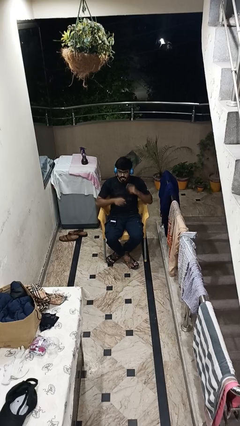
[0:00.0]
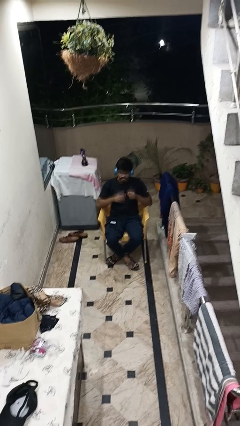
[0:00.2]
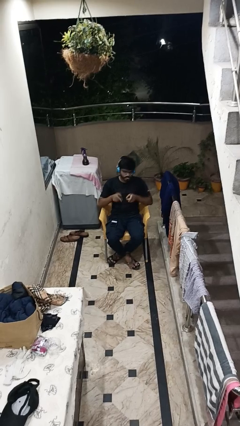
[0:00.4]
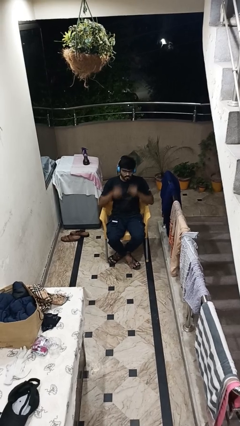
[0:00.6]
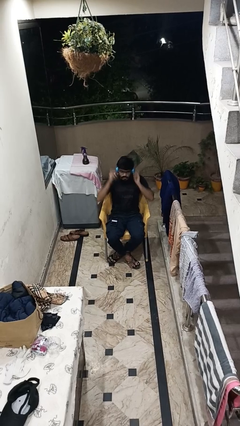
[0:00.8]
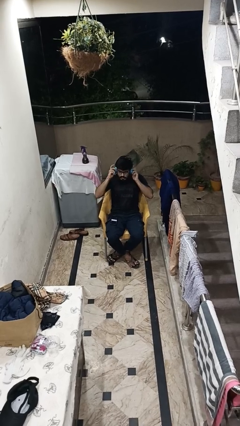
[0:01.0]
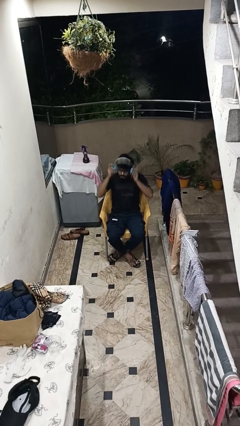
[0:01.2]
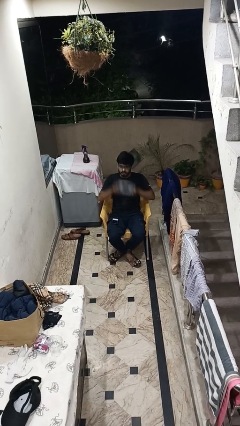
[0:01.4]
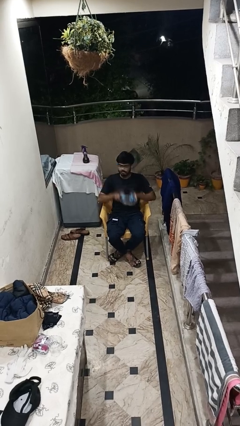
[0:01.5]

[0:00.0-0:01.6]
person takes off headphones

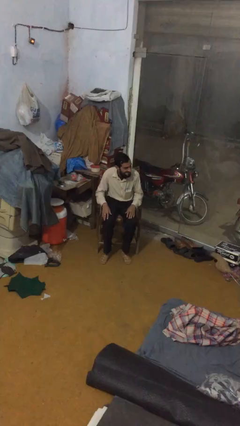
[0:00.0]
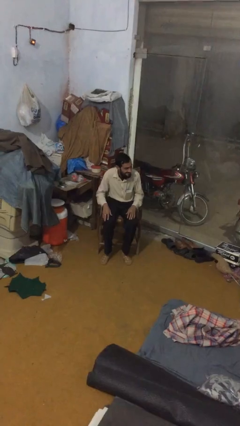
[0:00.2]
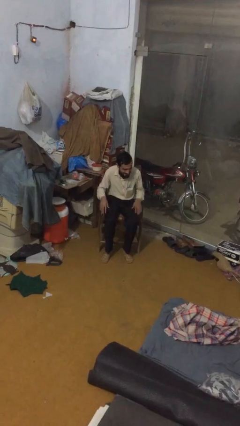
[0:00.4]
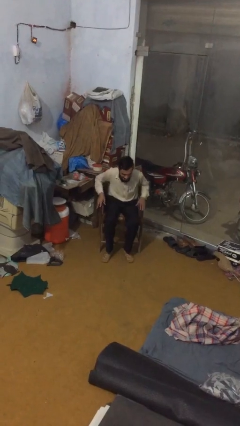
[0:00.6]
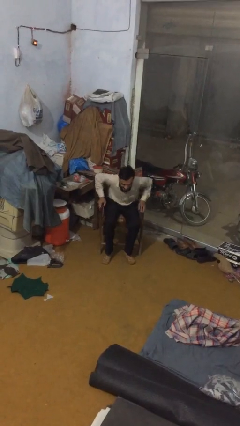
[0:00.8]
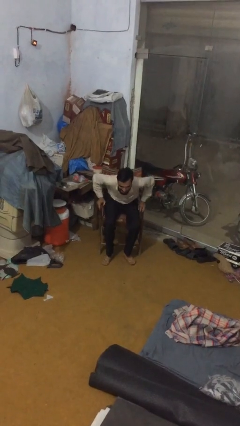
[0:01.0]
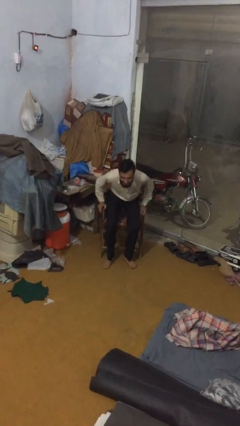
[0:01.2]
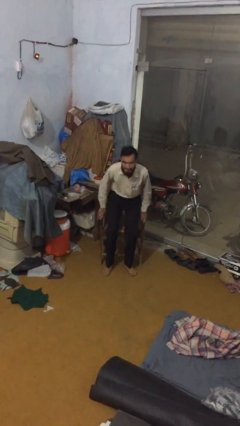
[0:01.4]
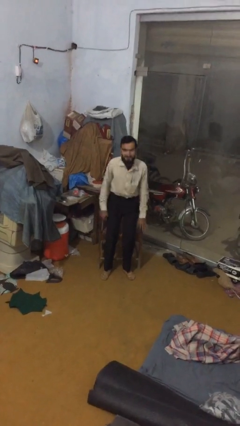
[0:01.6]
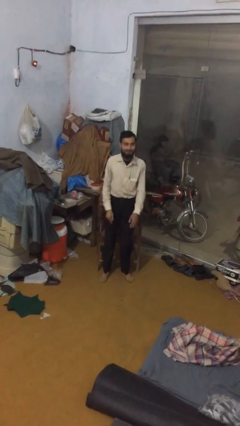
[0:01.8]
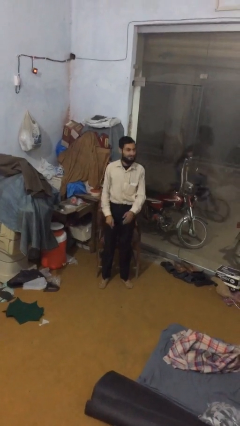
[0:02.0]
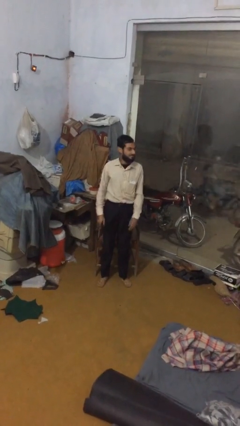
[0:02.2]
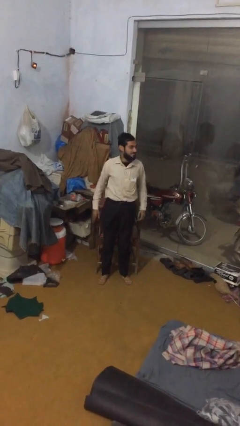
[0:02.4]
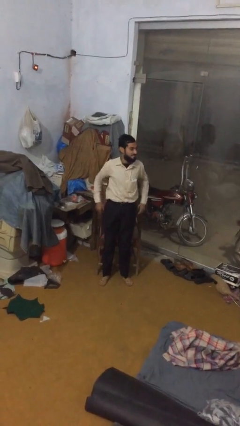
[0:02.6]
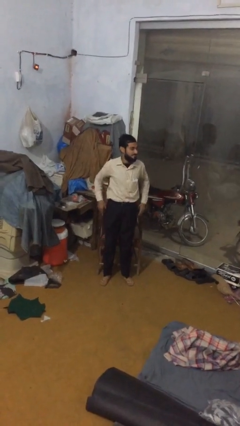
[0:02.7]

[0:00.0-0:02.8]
person stands up

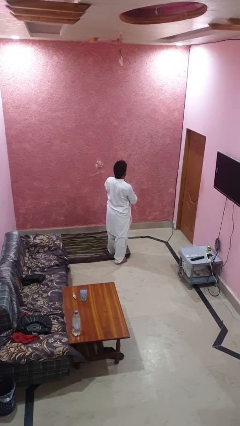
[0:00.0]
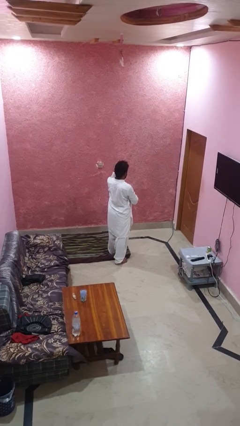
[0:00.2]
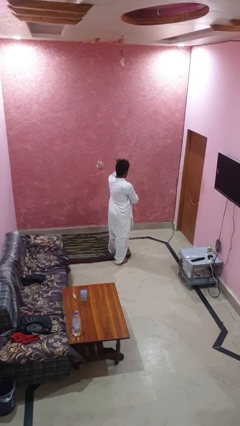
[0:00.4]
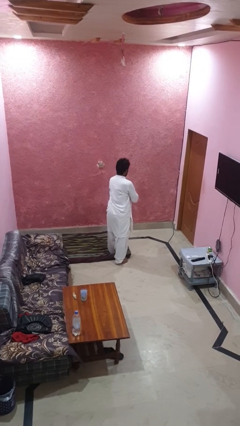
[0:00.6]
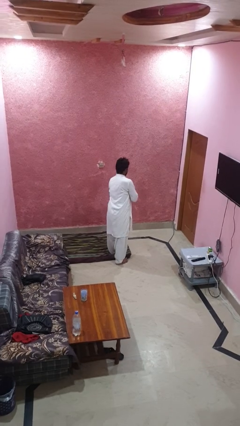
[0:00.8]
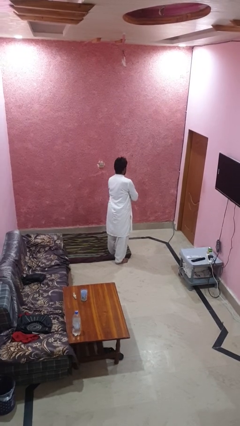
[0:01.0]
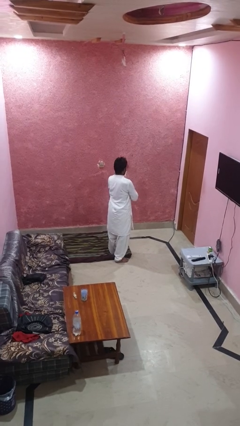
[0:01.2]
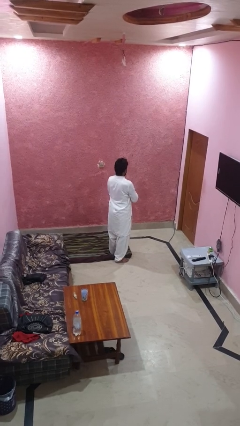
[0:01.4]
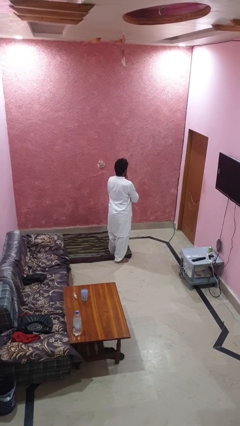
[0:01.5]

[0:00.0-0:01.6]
person karate chop

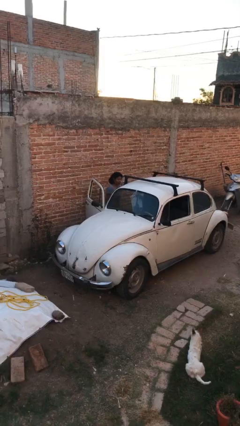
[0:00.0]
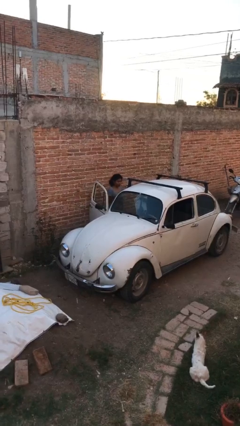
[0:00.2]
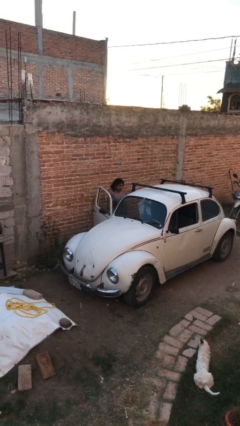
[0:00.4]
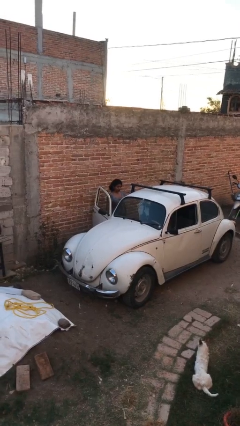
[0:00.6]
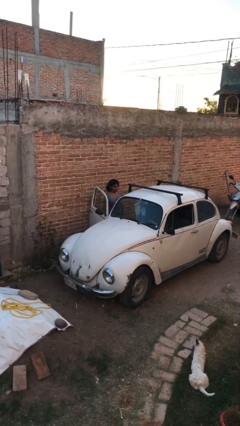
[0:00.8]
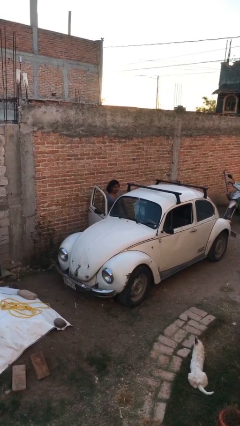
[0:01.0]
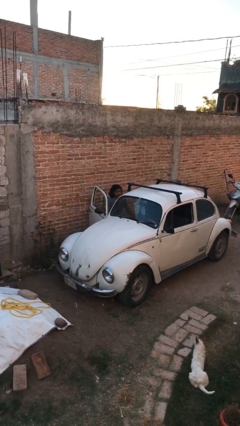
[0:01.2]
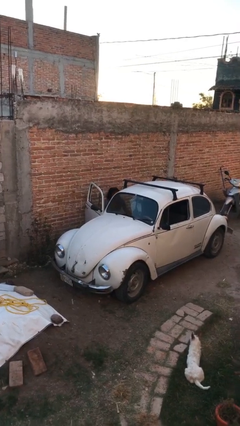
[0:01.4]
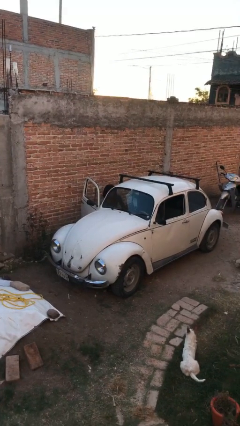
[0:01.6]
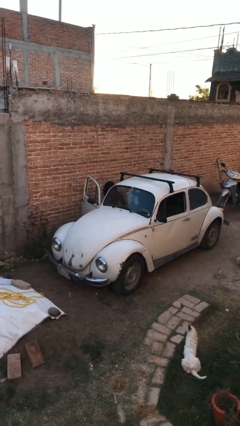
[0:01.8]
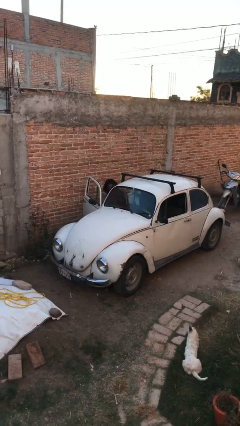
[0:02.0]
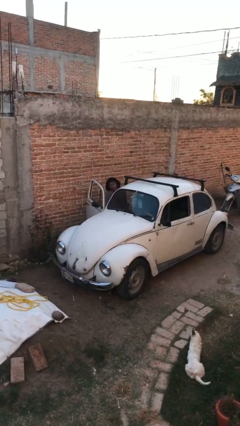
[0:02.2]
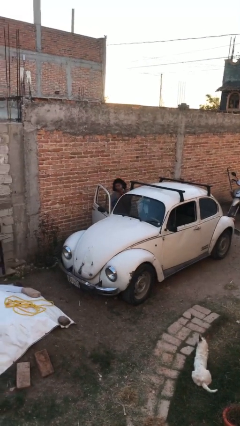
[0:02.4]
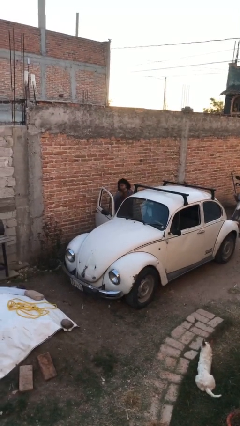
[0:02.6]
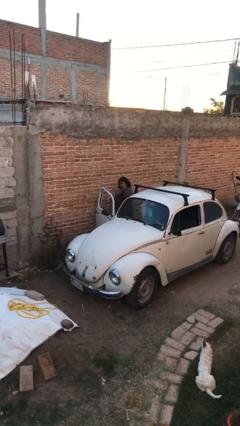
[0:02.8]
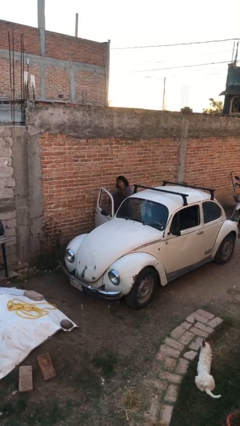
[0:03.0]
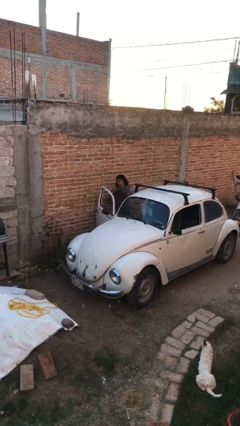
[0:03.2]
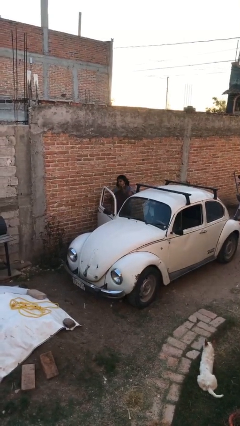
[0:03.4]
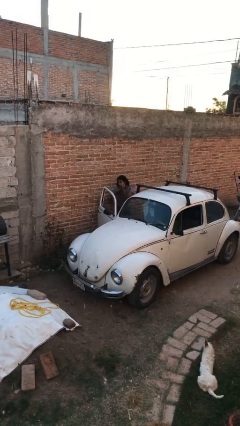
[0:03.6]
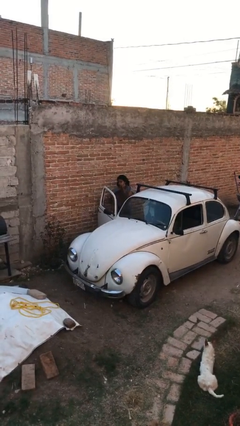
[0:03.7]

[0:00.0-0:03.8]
person unloads car

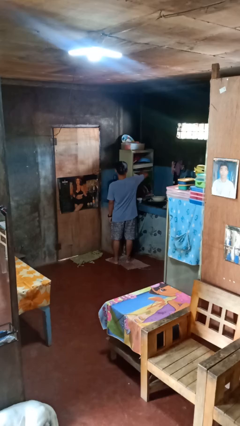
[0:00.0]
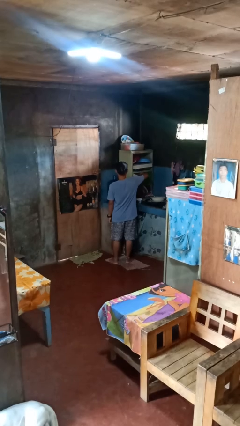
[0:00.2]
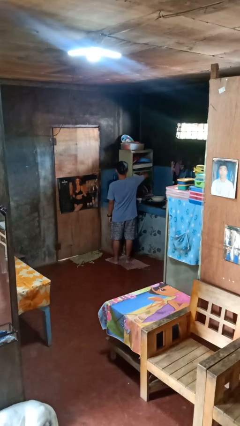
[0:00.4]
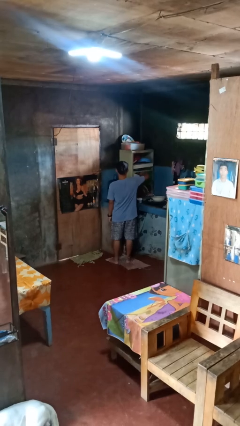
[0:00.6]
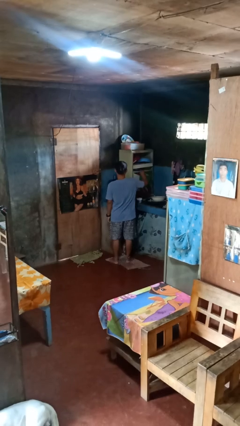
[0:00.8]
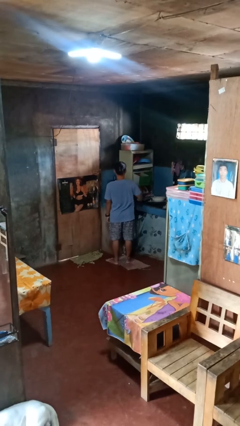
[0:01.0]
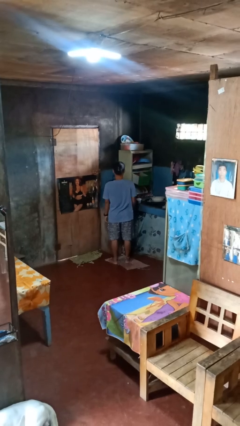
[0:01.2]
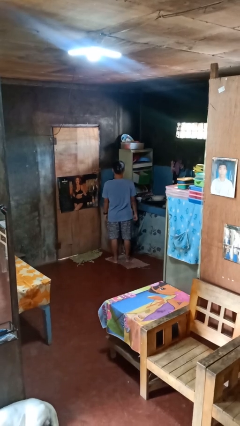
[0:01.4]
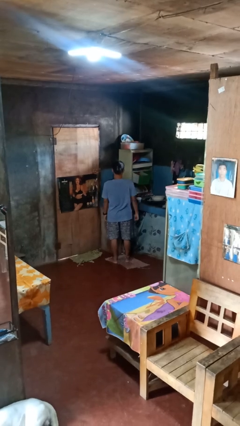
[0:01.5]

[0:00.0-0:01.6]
person puts object into kitchen drawer

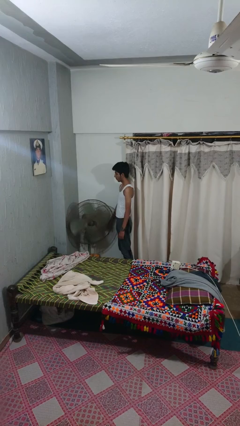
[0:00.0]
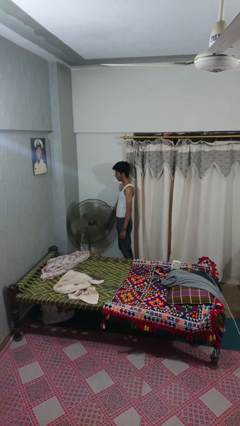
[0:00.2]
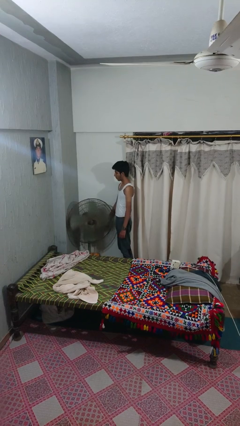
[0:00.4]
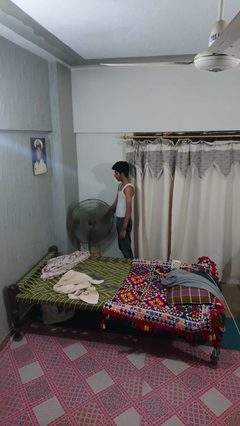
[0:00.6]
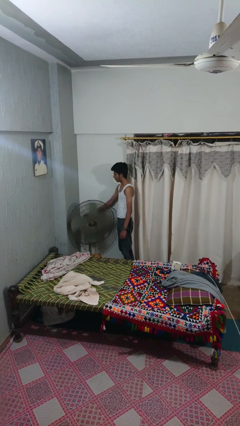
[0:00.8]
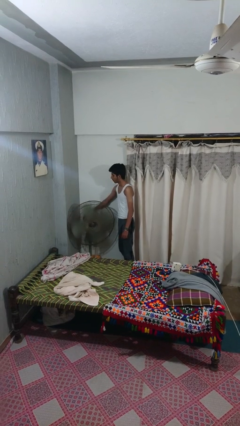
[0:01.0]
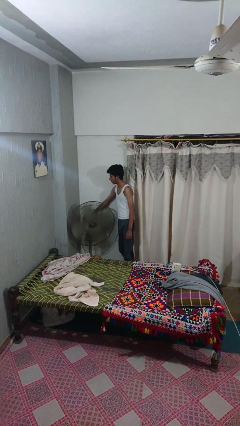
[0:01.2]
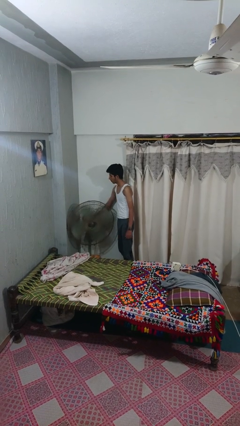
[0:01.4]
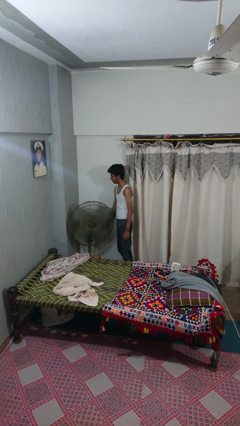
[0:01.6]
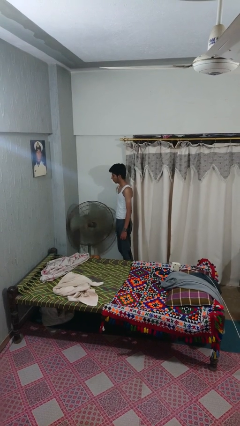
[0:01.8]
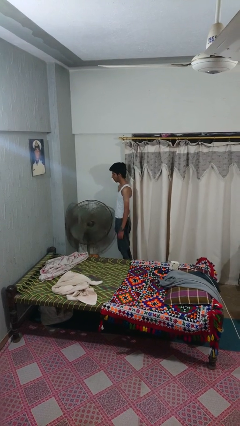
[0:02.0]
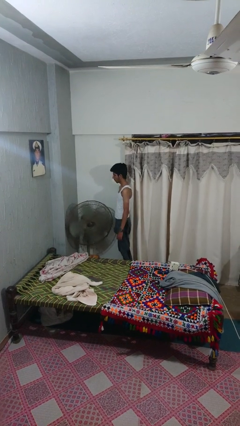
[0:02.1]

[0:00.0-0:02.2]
person turns off fan

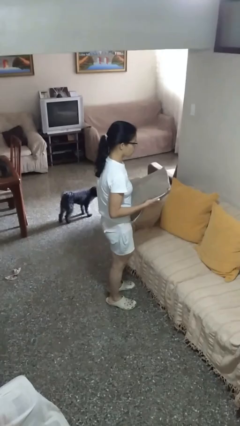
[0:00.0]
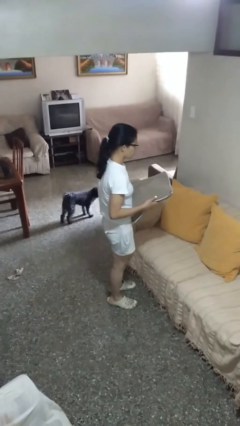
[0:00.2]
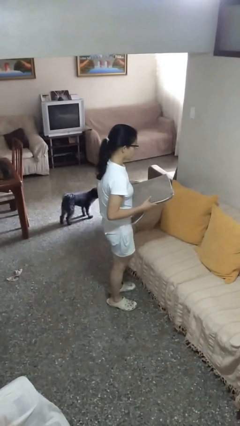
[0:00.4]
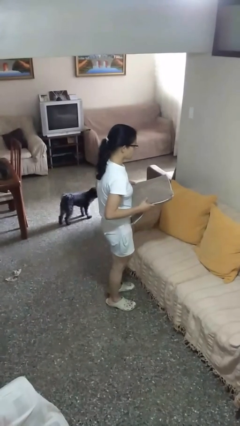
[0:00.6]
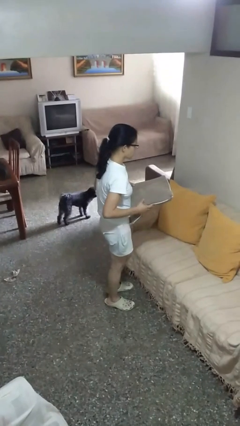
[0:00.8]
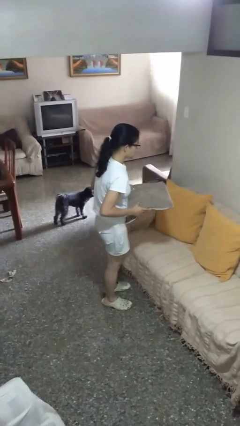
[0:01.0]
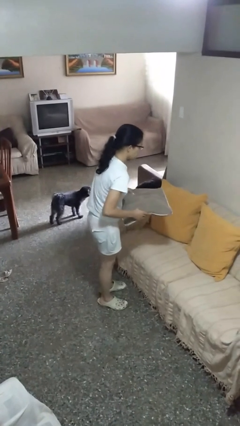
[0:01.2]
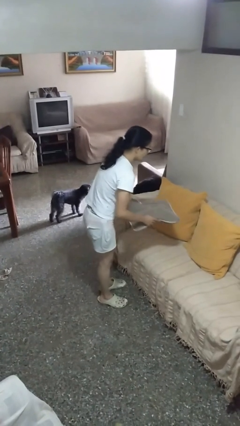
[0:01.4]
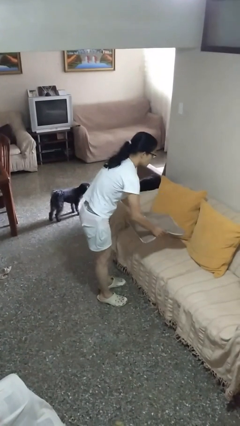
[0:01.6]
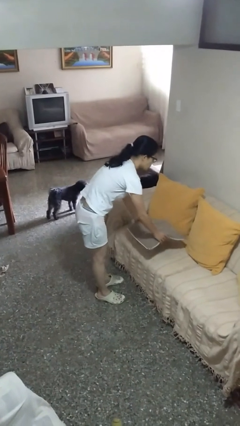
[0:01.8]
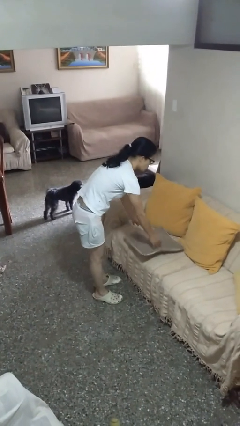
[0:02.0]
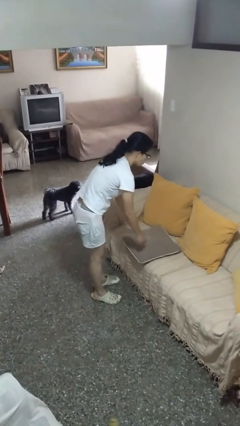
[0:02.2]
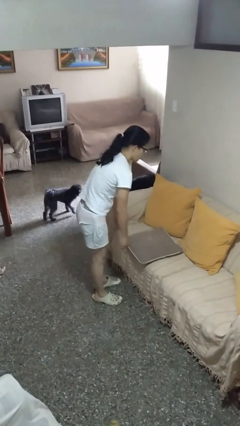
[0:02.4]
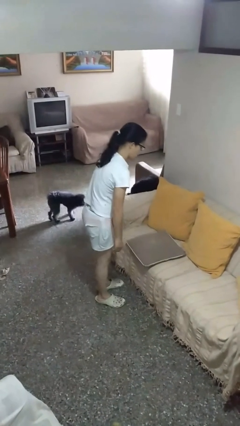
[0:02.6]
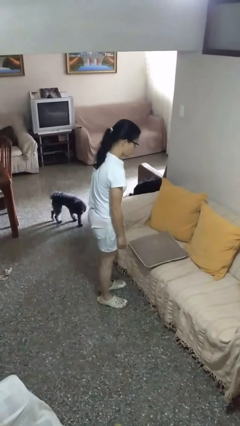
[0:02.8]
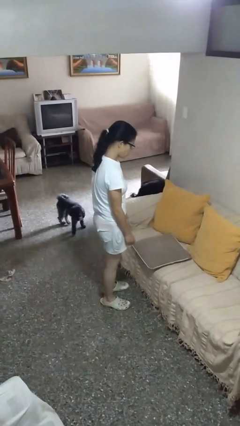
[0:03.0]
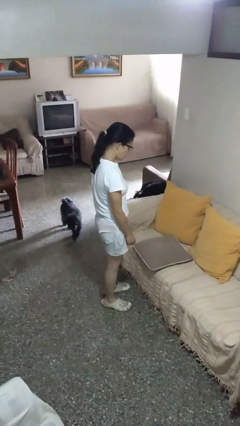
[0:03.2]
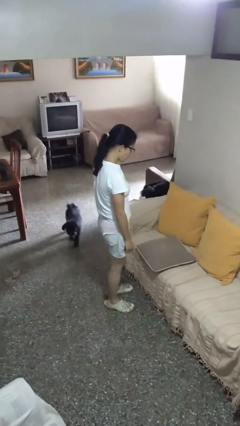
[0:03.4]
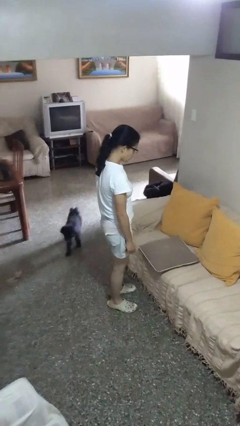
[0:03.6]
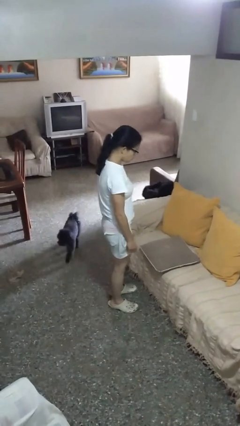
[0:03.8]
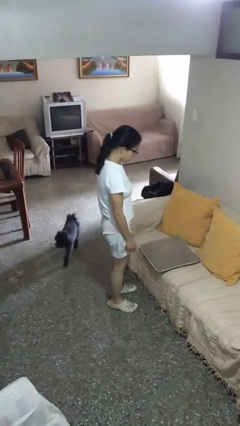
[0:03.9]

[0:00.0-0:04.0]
person puts down object on couch
